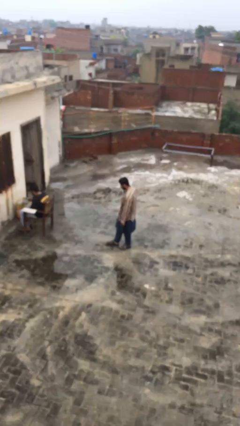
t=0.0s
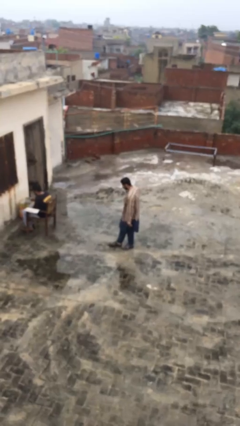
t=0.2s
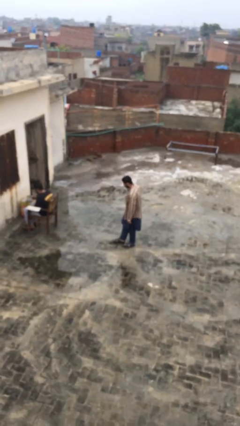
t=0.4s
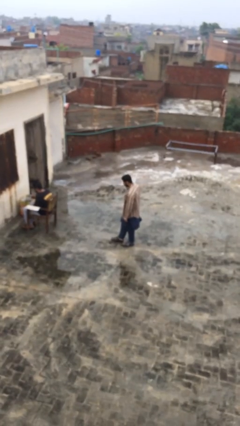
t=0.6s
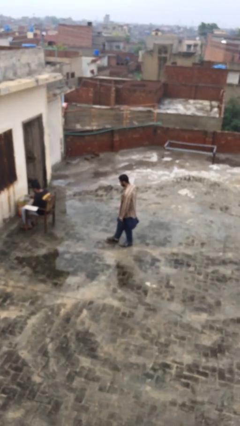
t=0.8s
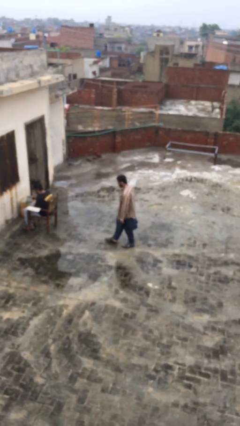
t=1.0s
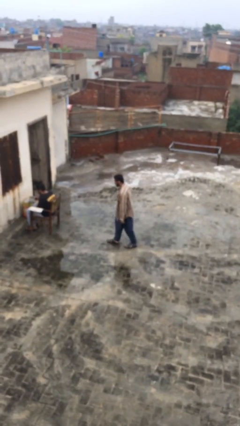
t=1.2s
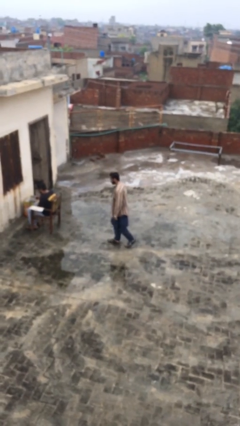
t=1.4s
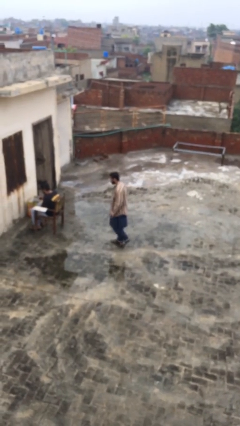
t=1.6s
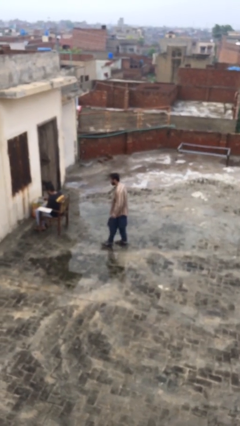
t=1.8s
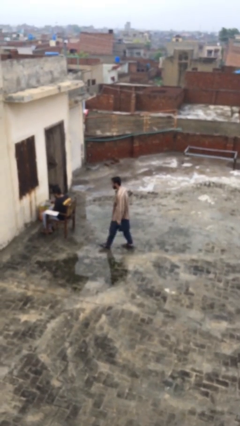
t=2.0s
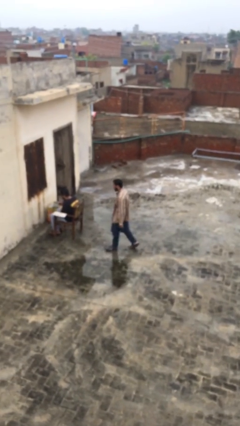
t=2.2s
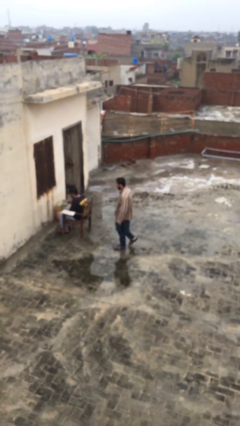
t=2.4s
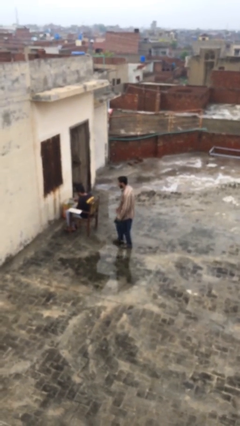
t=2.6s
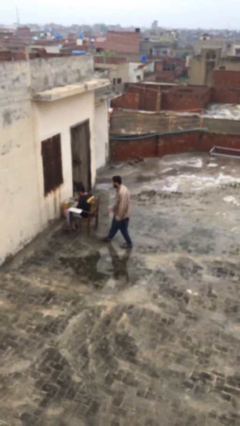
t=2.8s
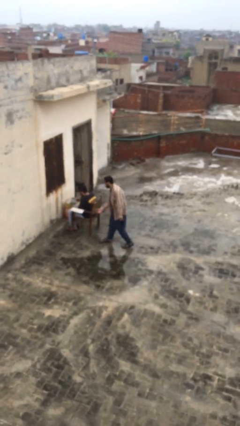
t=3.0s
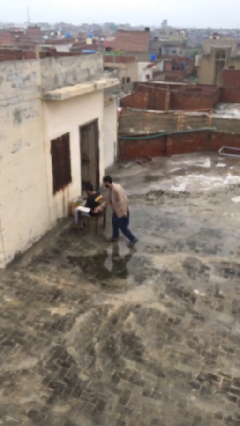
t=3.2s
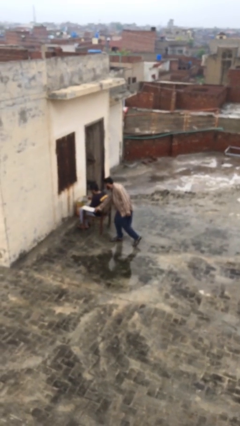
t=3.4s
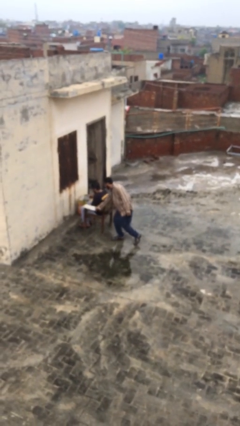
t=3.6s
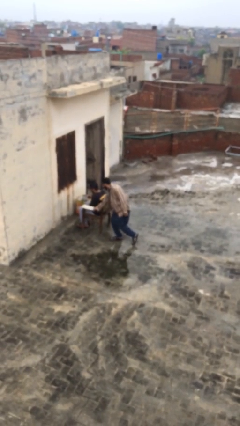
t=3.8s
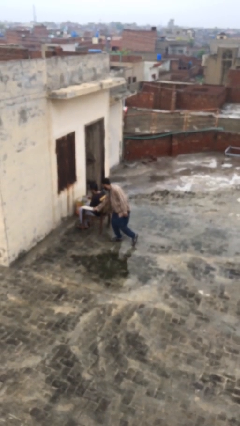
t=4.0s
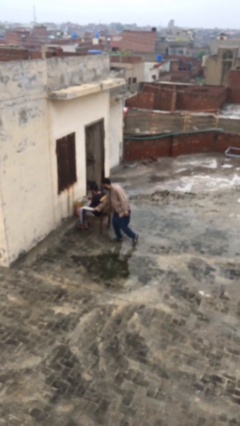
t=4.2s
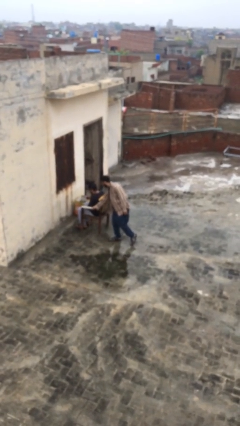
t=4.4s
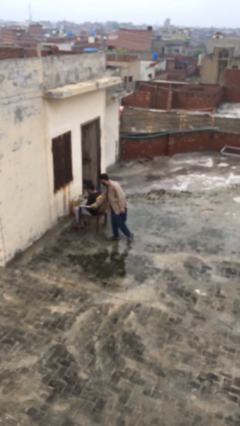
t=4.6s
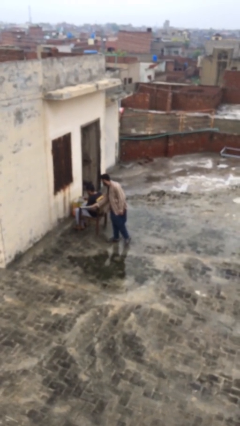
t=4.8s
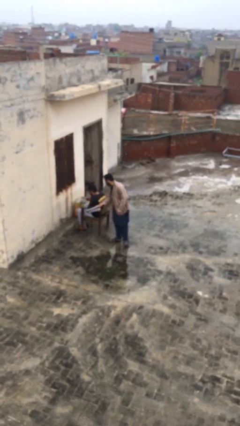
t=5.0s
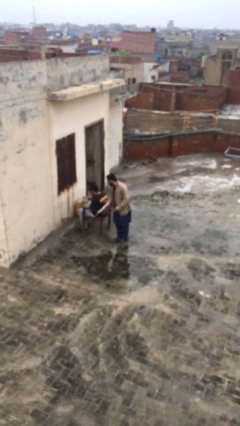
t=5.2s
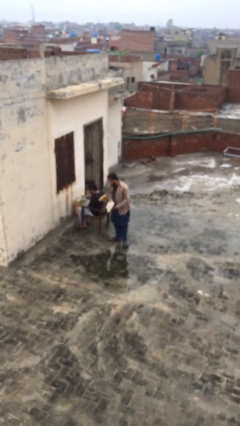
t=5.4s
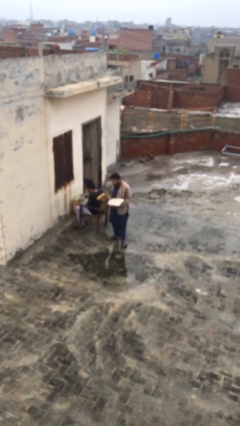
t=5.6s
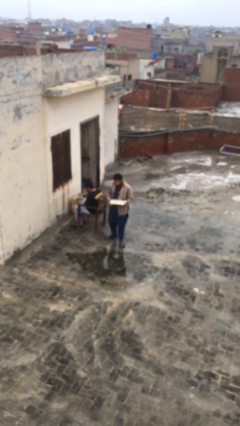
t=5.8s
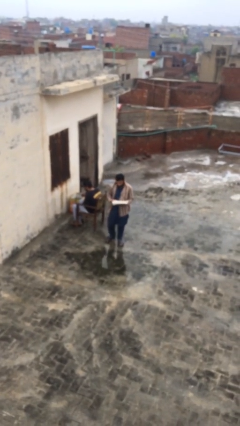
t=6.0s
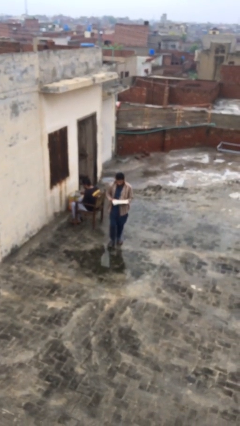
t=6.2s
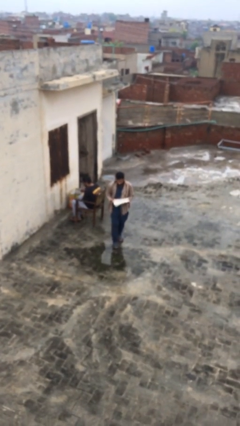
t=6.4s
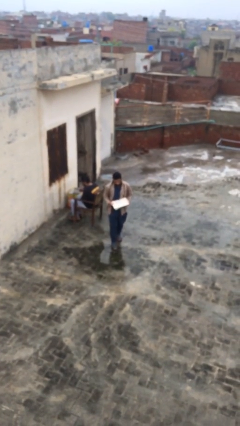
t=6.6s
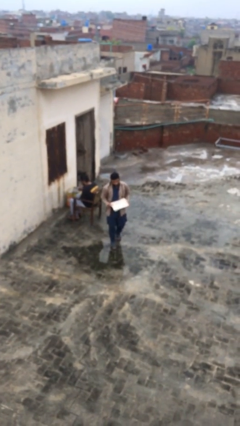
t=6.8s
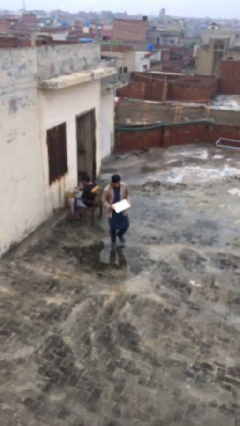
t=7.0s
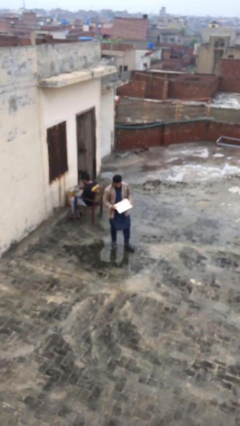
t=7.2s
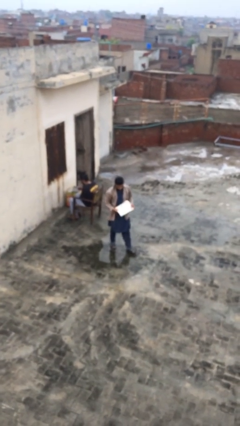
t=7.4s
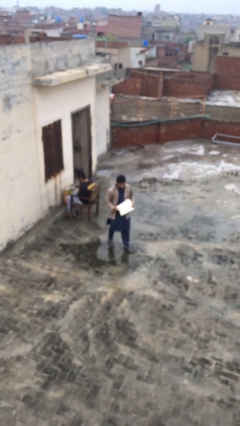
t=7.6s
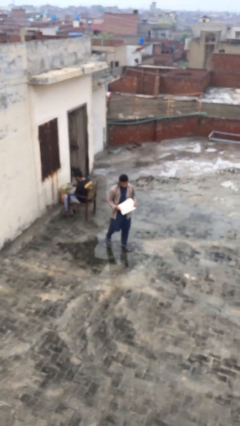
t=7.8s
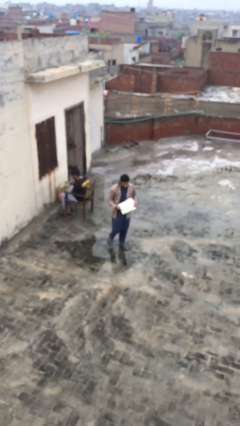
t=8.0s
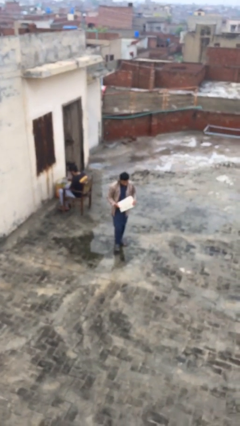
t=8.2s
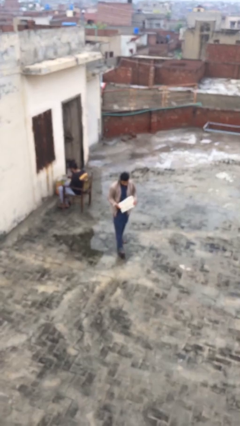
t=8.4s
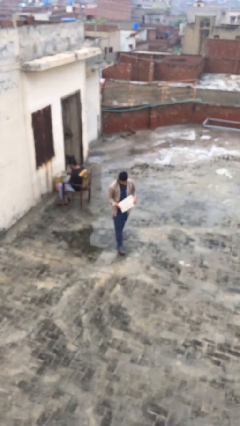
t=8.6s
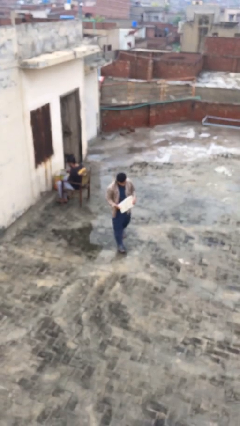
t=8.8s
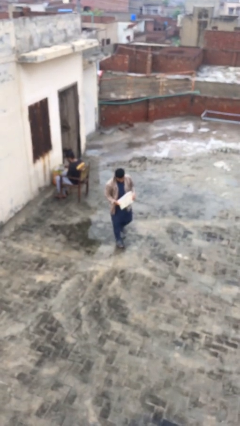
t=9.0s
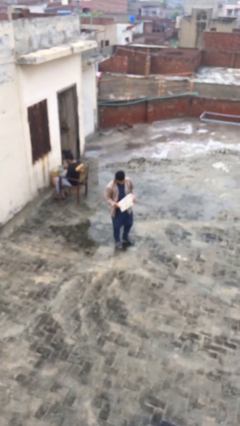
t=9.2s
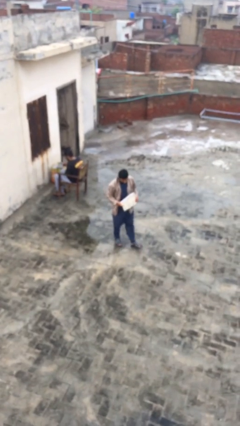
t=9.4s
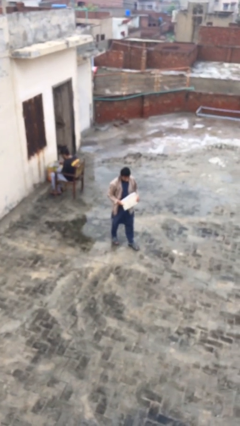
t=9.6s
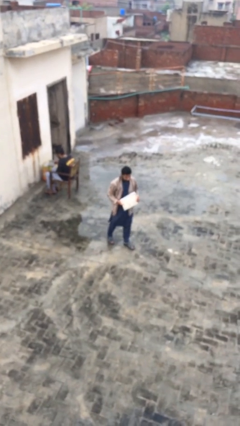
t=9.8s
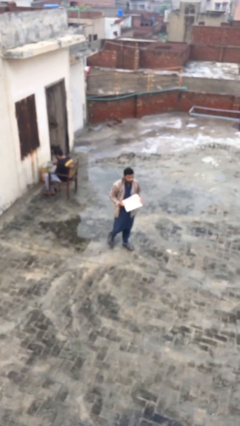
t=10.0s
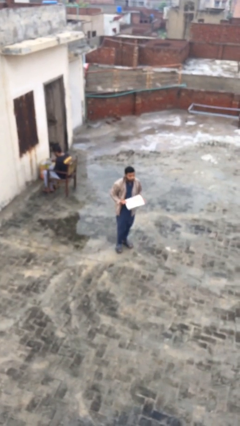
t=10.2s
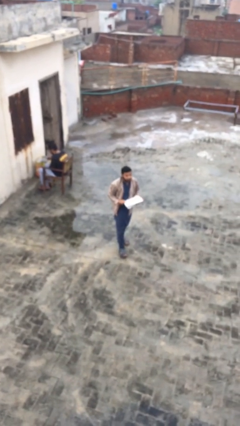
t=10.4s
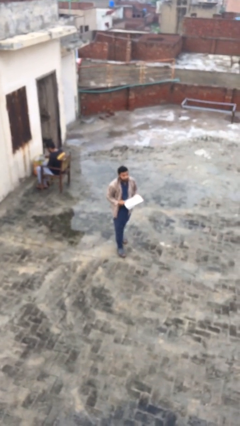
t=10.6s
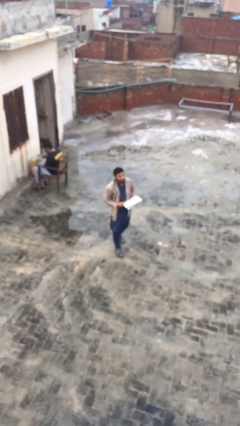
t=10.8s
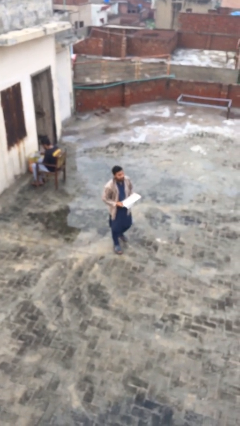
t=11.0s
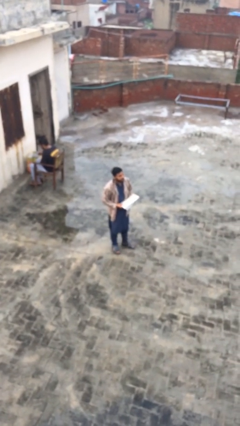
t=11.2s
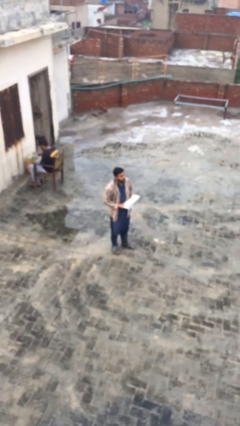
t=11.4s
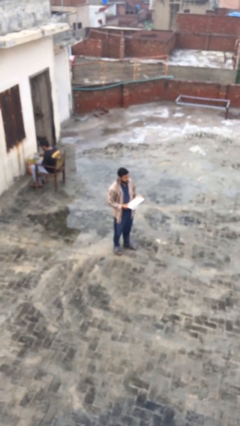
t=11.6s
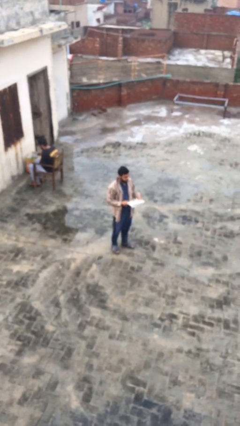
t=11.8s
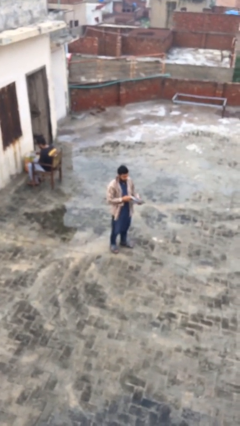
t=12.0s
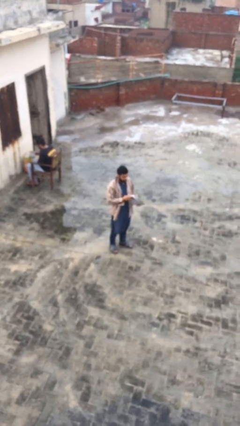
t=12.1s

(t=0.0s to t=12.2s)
person steals object from person

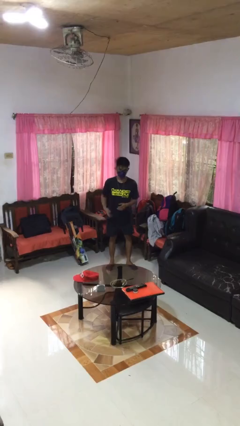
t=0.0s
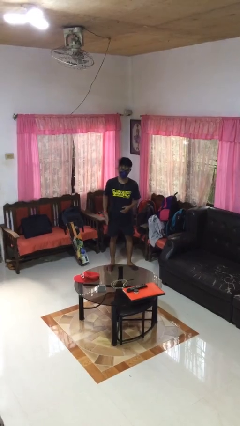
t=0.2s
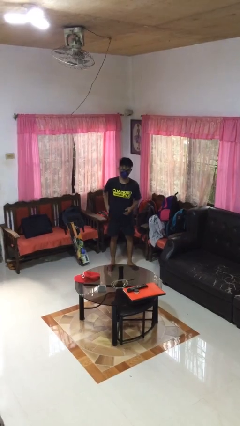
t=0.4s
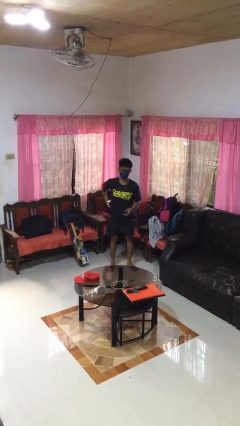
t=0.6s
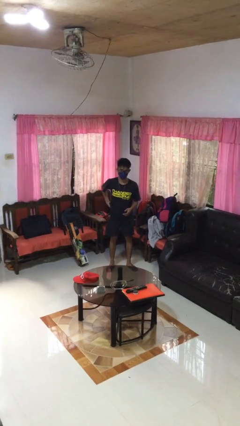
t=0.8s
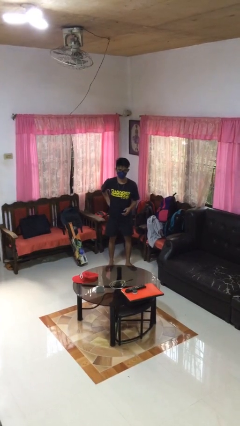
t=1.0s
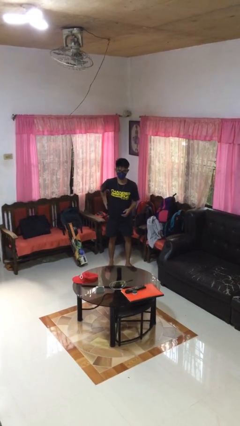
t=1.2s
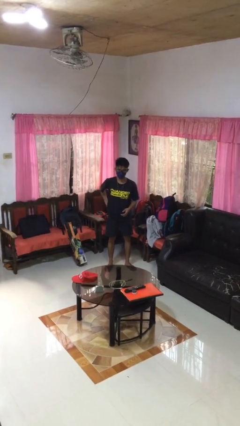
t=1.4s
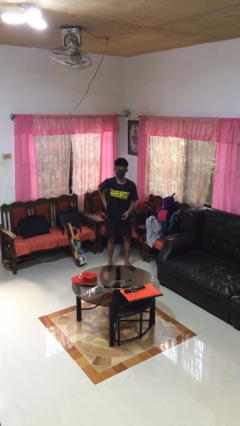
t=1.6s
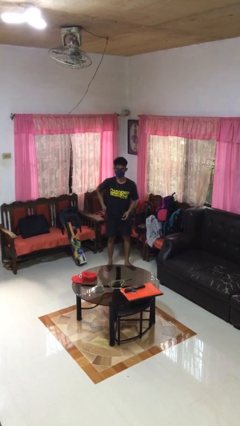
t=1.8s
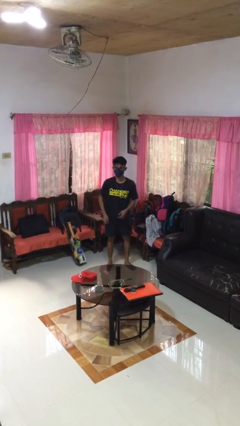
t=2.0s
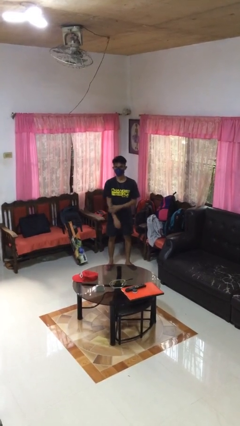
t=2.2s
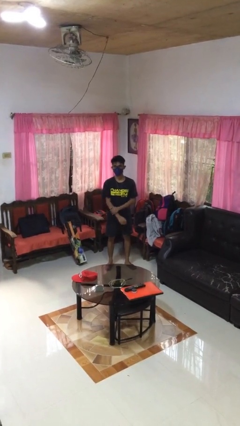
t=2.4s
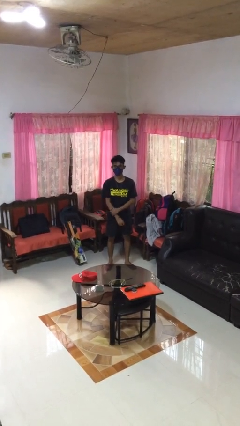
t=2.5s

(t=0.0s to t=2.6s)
person puts phone into pocket

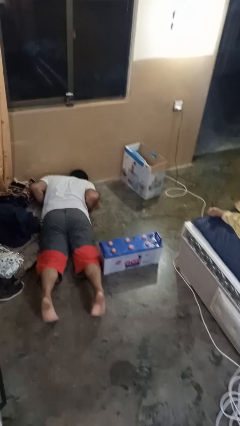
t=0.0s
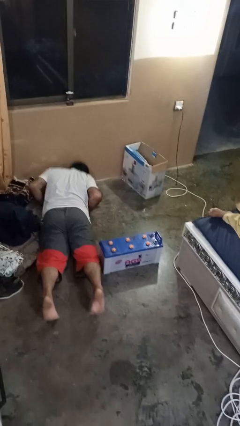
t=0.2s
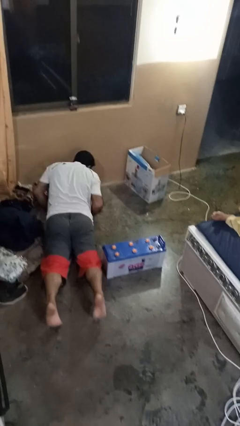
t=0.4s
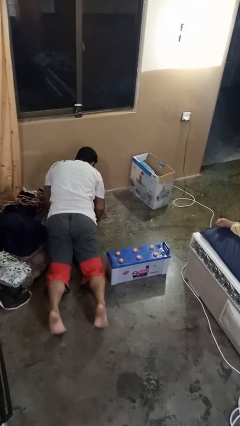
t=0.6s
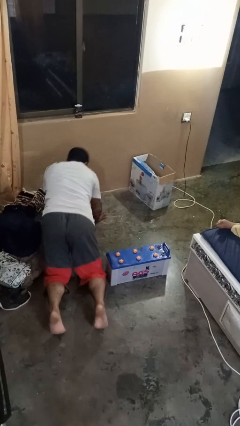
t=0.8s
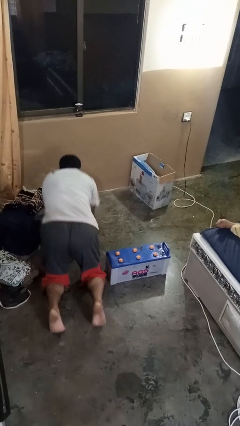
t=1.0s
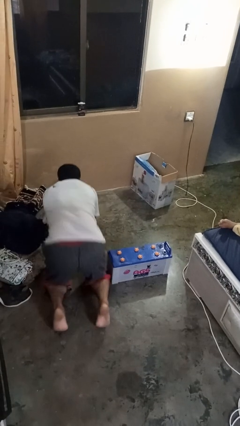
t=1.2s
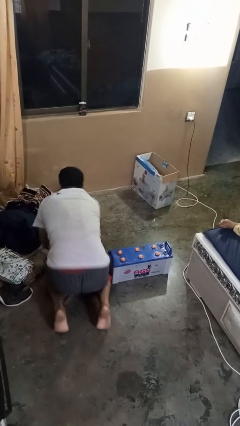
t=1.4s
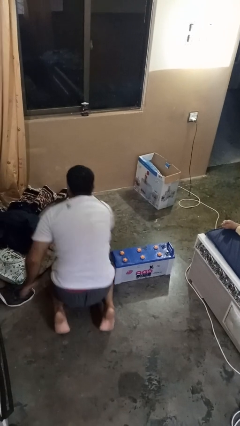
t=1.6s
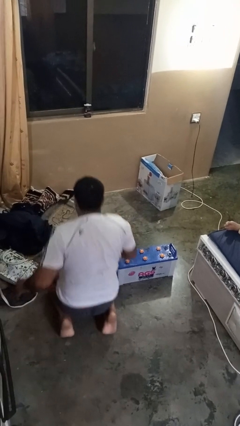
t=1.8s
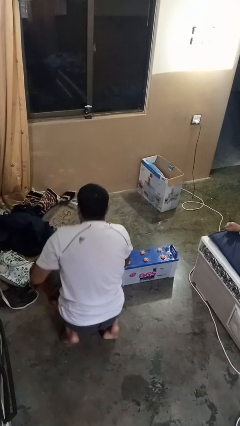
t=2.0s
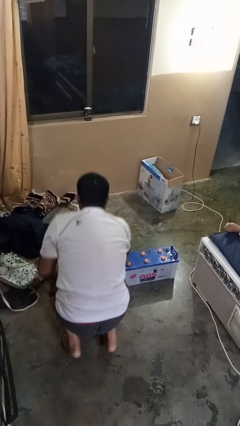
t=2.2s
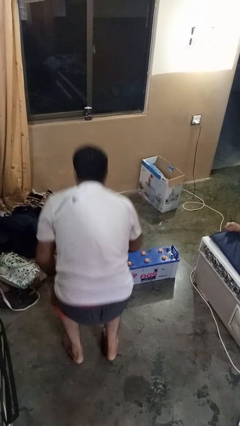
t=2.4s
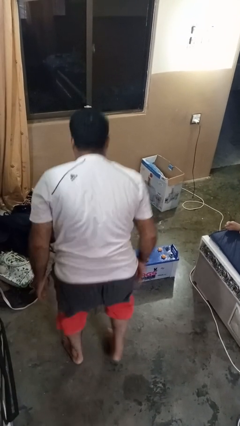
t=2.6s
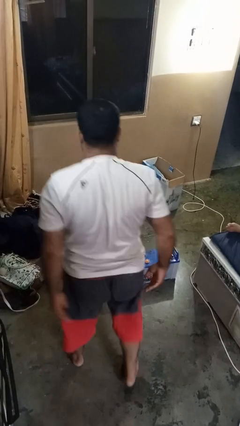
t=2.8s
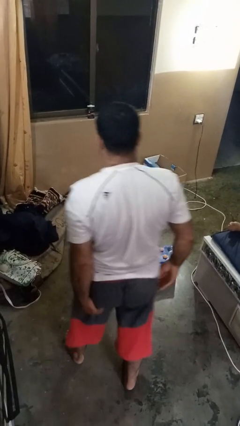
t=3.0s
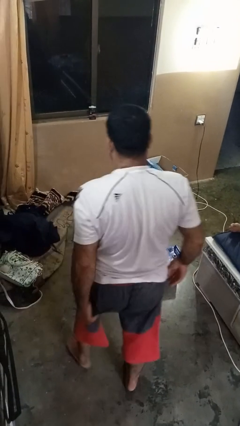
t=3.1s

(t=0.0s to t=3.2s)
person stands up from floor
